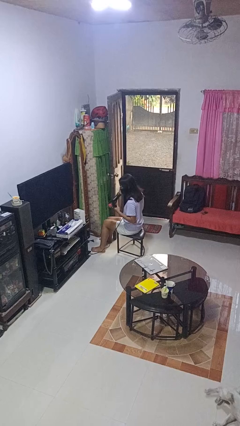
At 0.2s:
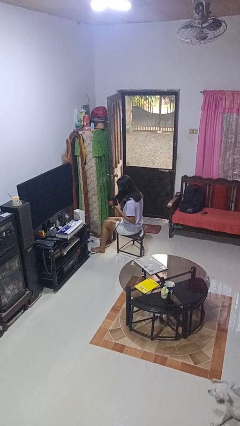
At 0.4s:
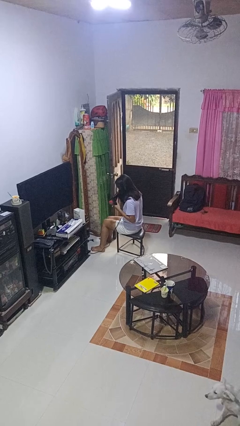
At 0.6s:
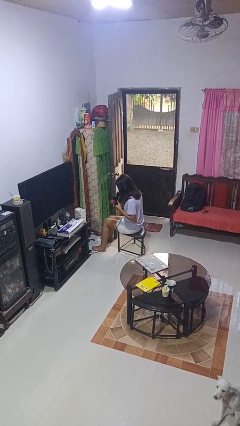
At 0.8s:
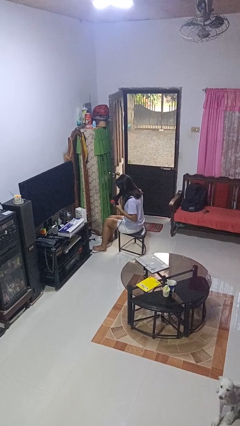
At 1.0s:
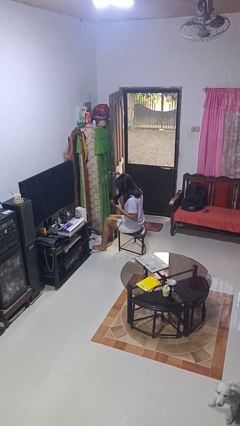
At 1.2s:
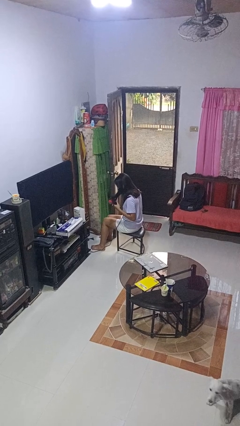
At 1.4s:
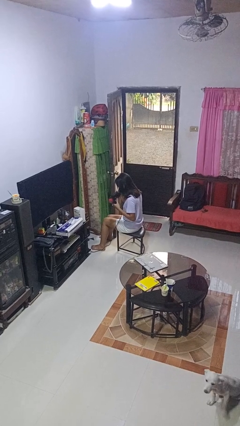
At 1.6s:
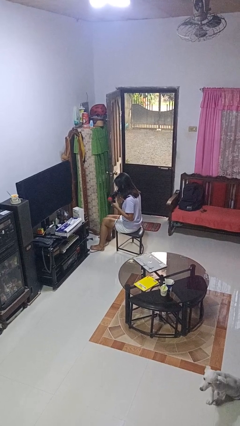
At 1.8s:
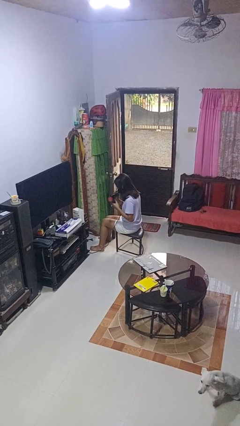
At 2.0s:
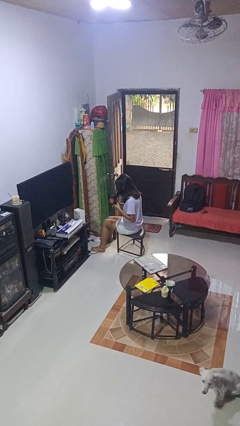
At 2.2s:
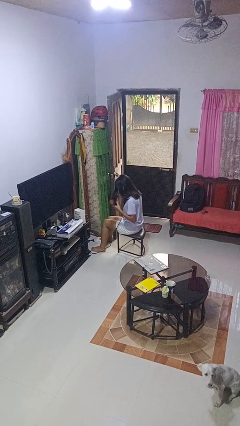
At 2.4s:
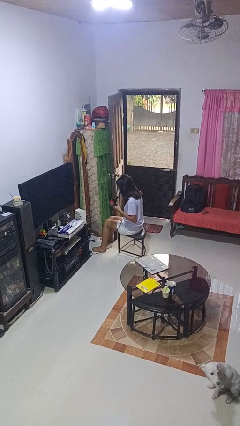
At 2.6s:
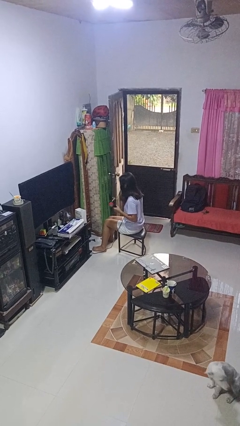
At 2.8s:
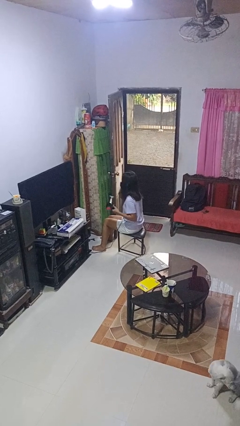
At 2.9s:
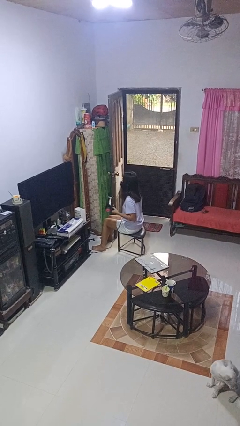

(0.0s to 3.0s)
person dries hair with hairdryer

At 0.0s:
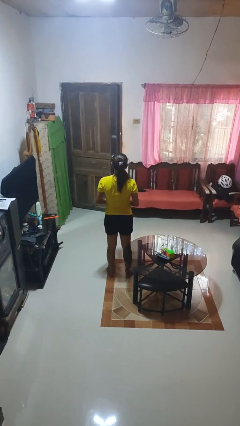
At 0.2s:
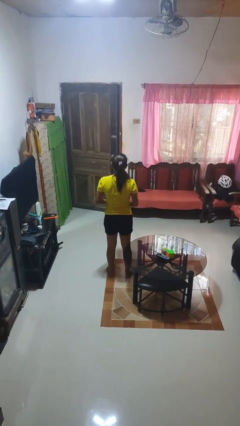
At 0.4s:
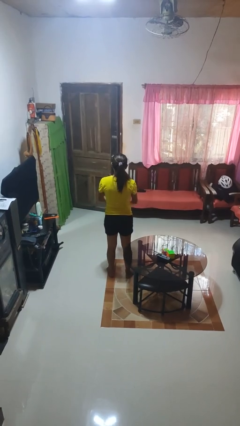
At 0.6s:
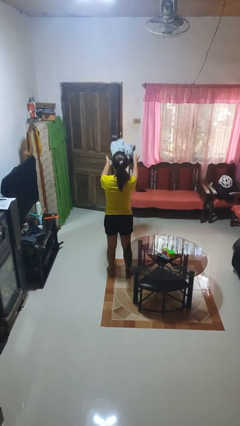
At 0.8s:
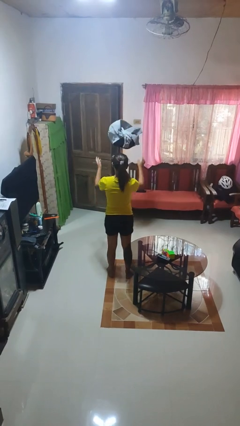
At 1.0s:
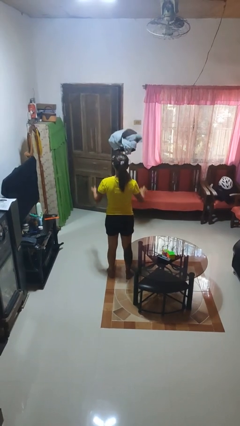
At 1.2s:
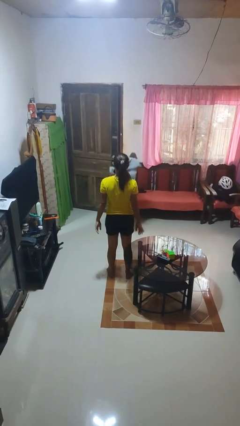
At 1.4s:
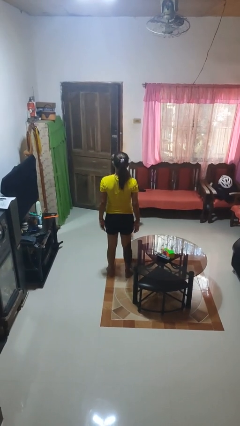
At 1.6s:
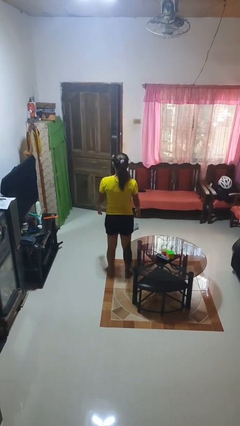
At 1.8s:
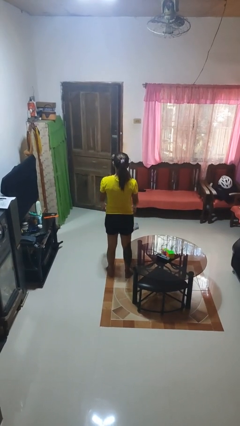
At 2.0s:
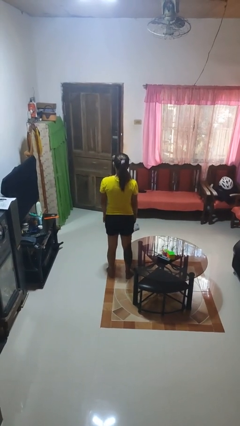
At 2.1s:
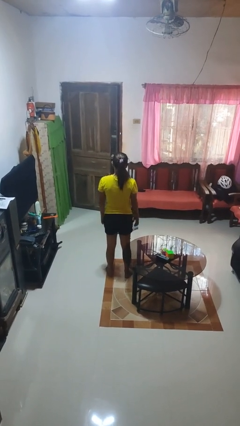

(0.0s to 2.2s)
person throws object into air

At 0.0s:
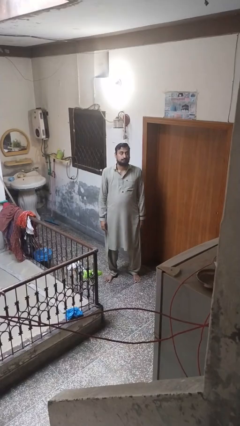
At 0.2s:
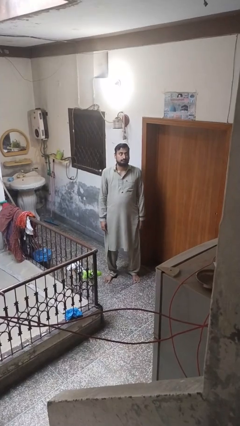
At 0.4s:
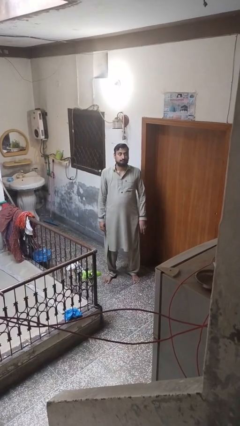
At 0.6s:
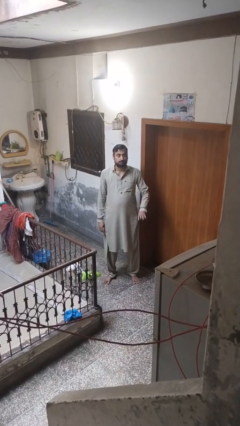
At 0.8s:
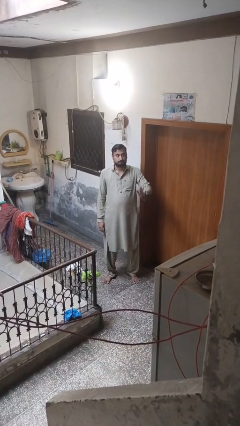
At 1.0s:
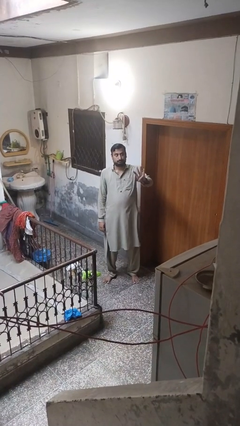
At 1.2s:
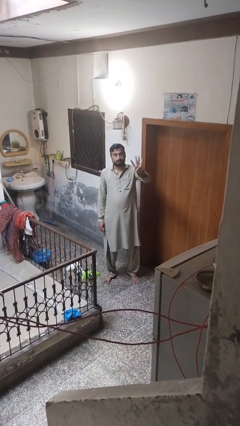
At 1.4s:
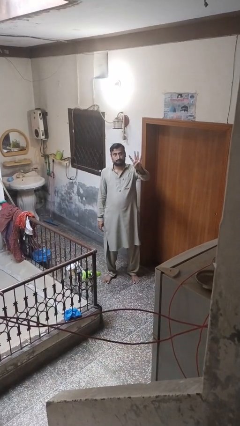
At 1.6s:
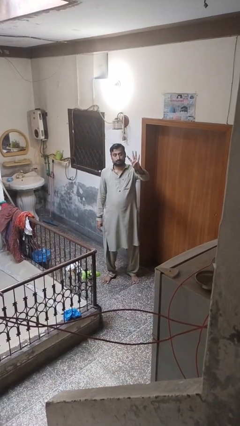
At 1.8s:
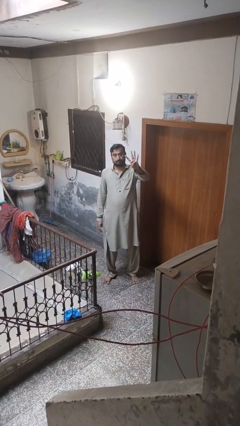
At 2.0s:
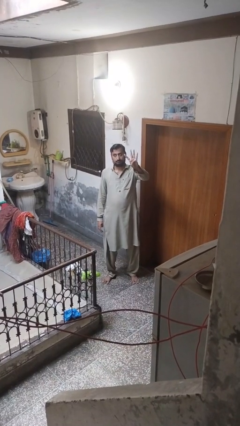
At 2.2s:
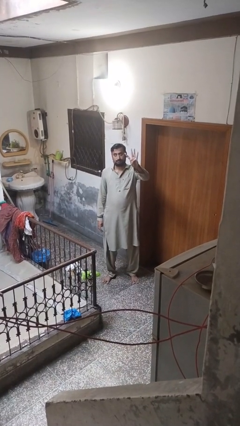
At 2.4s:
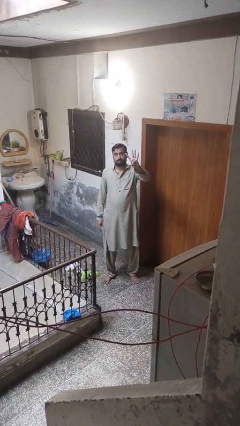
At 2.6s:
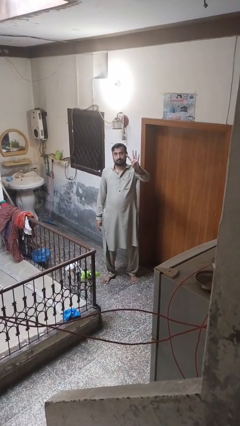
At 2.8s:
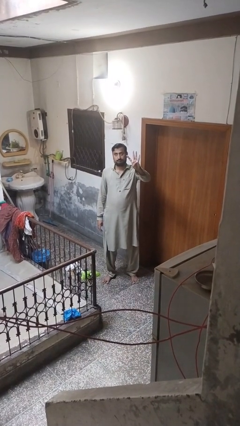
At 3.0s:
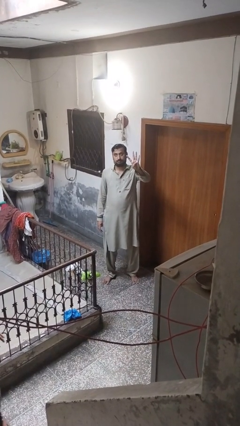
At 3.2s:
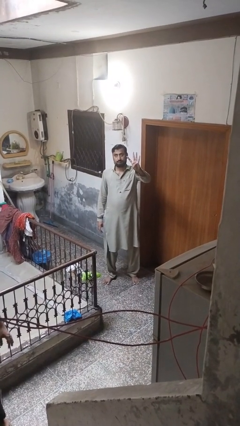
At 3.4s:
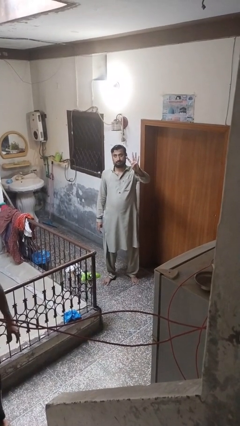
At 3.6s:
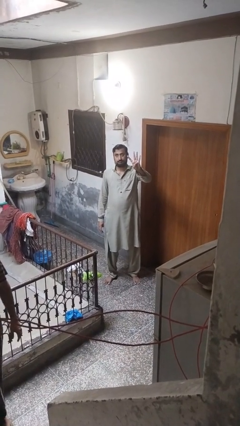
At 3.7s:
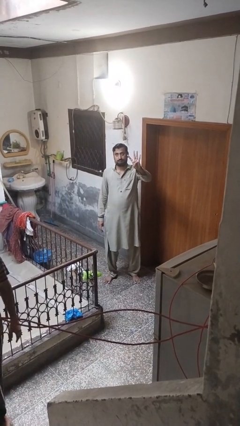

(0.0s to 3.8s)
person gestures number four

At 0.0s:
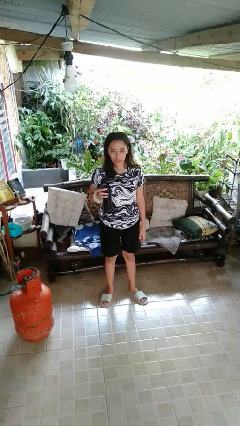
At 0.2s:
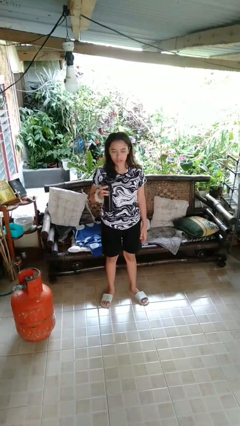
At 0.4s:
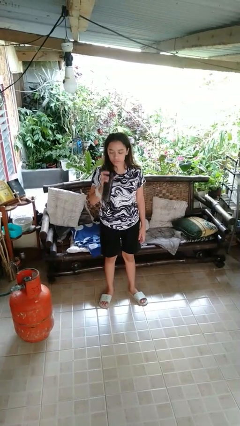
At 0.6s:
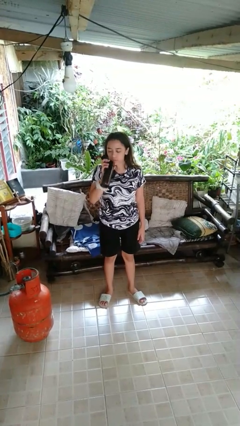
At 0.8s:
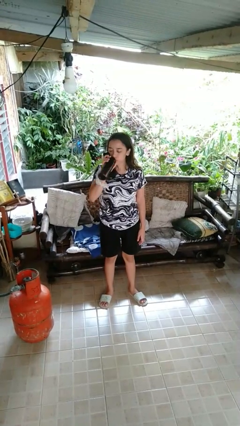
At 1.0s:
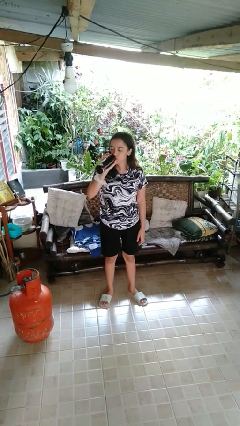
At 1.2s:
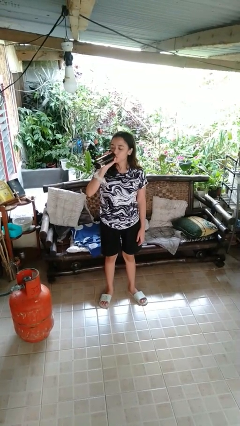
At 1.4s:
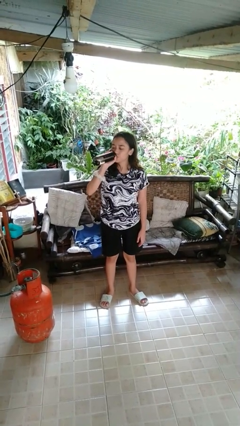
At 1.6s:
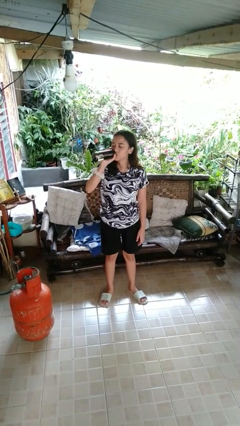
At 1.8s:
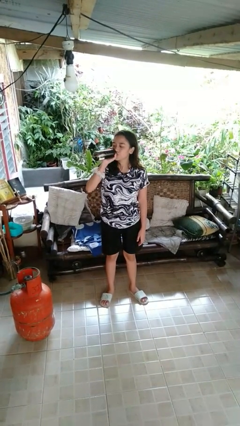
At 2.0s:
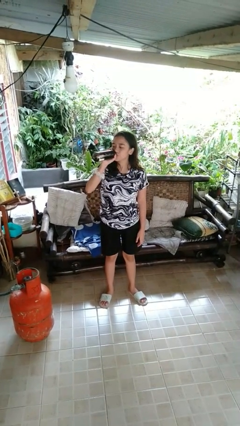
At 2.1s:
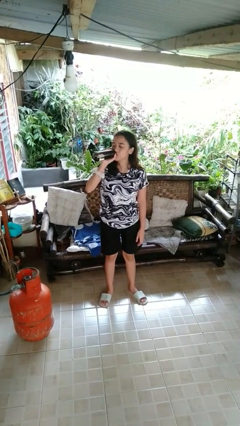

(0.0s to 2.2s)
person drinks from bottle

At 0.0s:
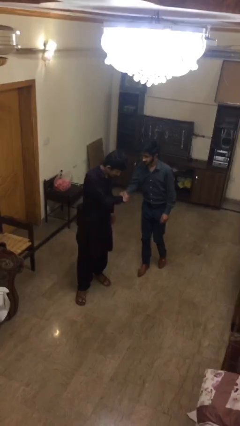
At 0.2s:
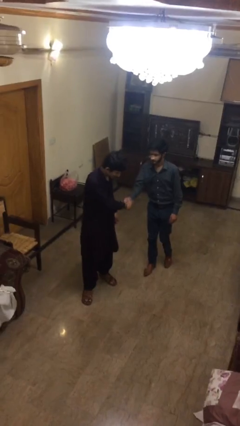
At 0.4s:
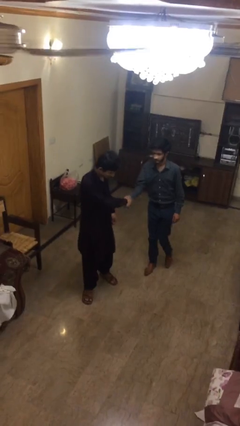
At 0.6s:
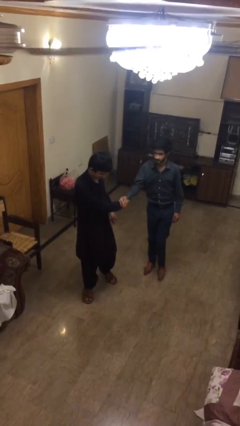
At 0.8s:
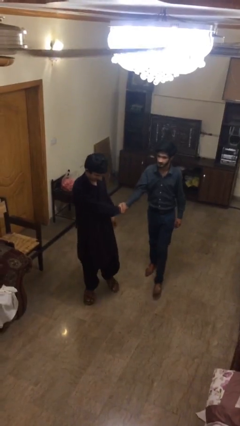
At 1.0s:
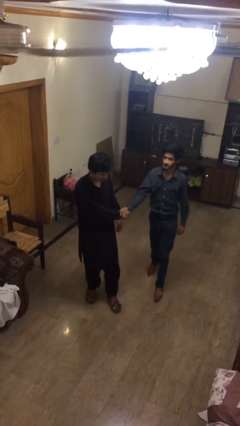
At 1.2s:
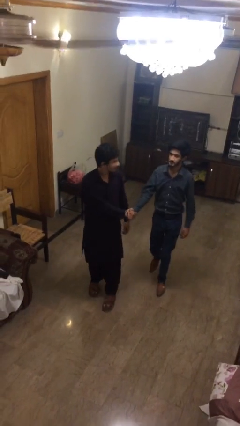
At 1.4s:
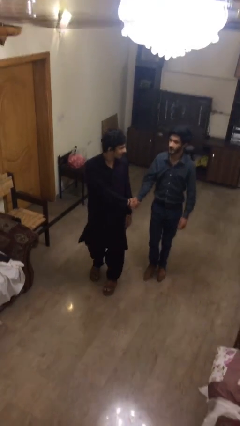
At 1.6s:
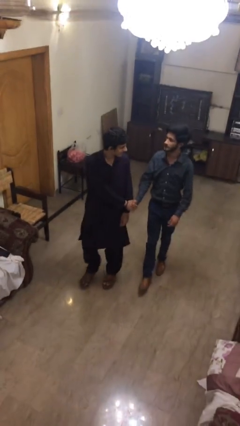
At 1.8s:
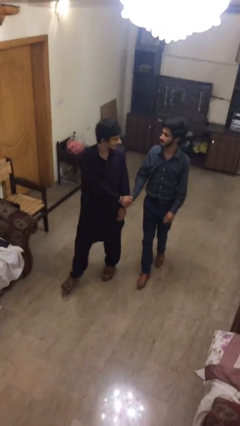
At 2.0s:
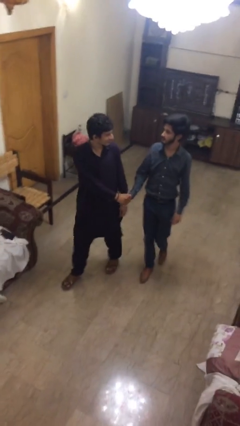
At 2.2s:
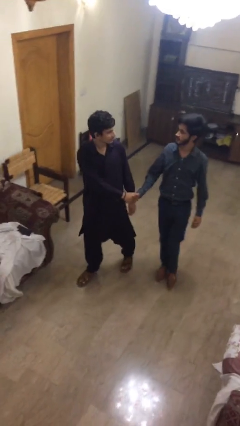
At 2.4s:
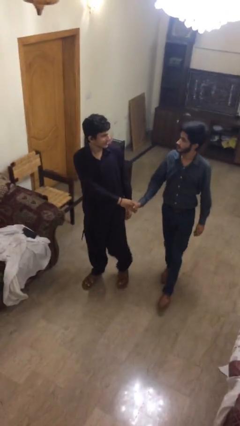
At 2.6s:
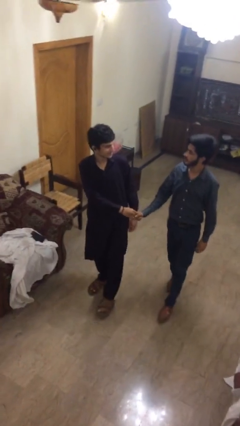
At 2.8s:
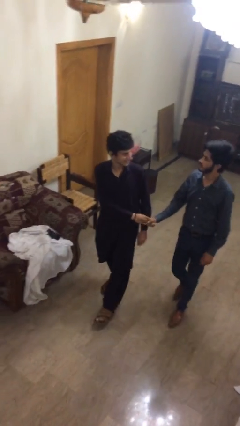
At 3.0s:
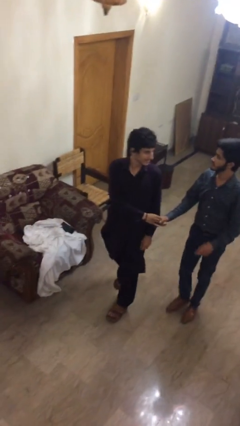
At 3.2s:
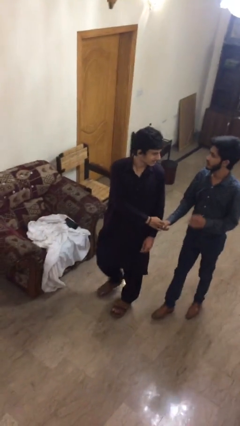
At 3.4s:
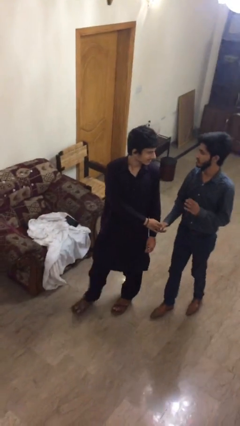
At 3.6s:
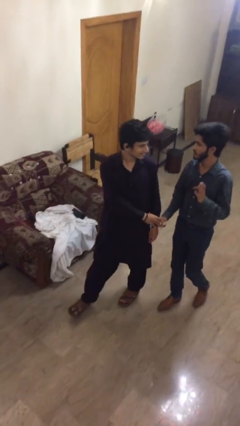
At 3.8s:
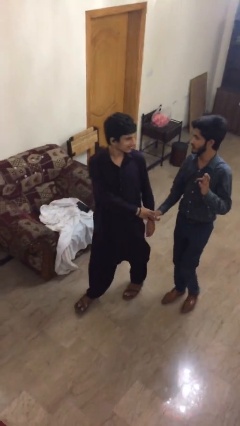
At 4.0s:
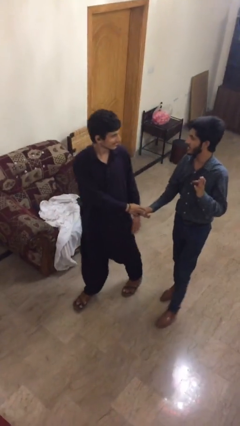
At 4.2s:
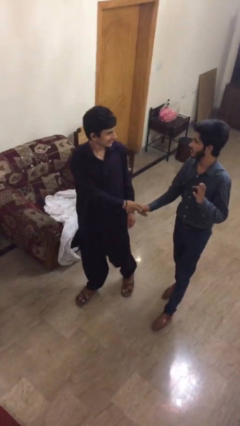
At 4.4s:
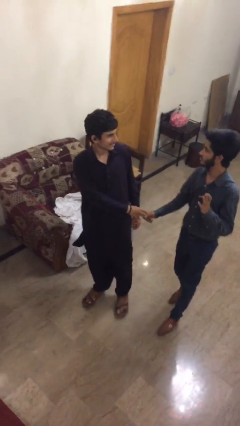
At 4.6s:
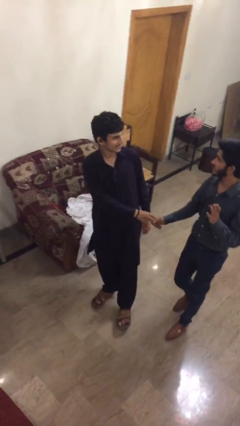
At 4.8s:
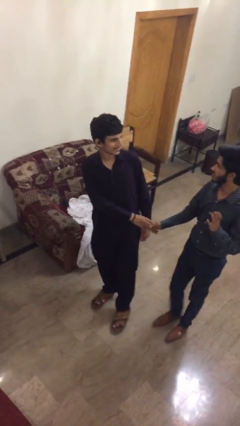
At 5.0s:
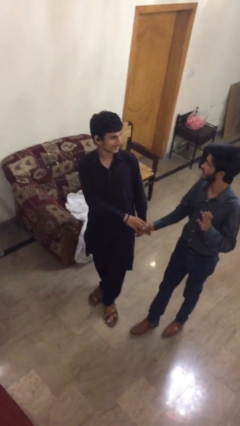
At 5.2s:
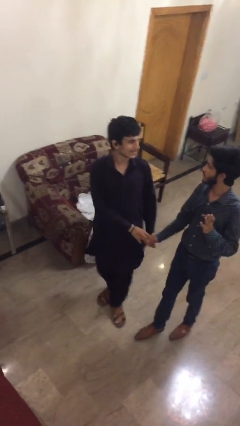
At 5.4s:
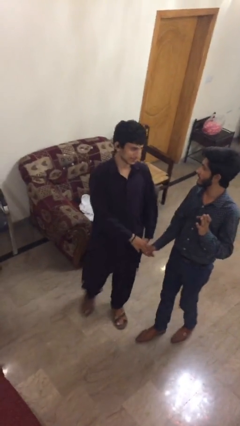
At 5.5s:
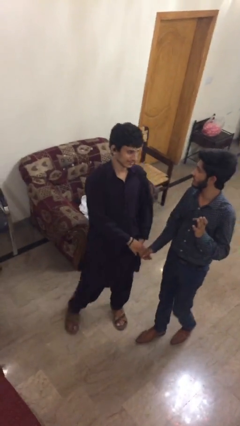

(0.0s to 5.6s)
person talks to person

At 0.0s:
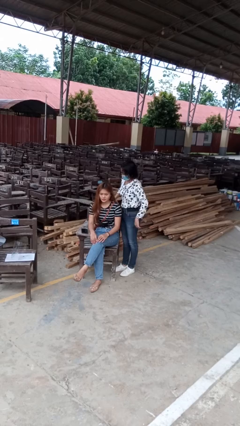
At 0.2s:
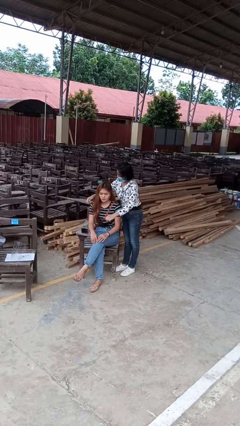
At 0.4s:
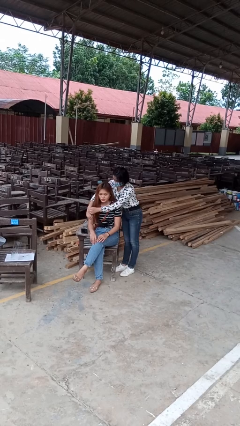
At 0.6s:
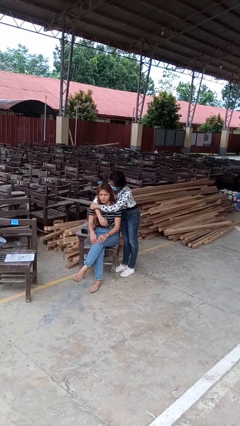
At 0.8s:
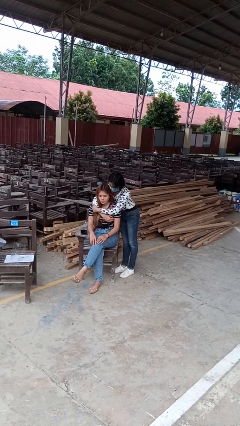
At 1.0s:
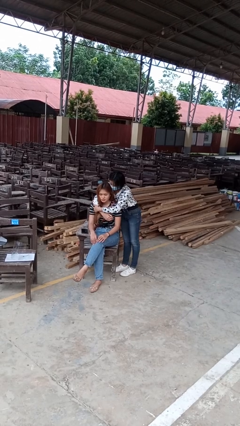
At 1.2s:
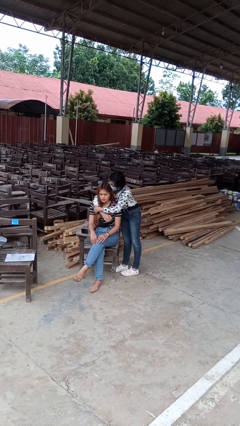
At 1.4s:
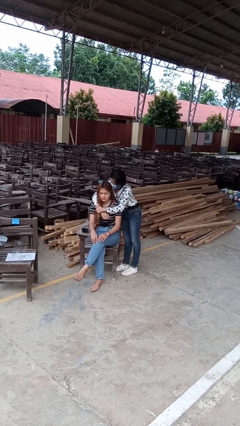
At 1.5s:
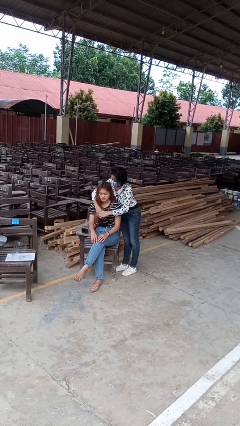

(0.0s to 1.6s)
person hugs person from behind
